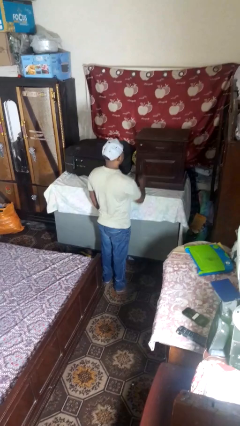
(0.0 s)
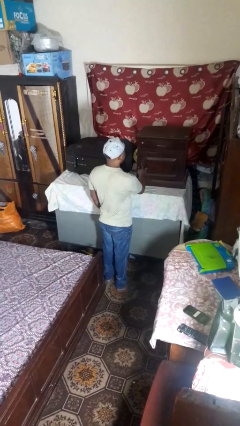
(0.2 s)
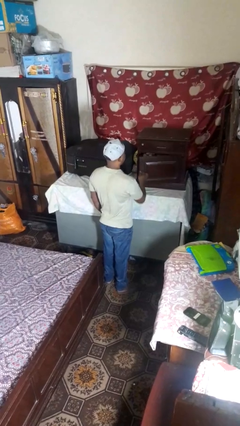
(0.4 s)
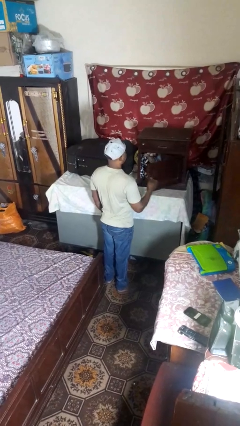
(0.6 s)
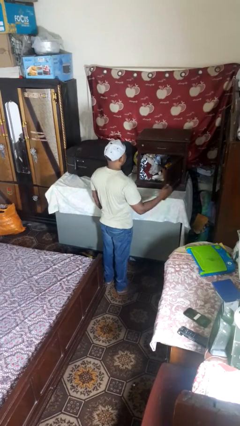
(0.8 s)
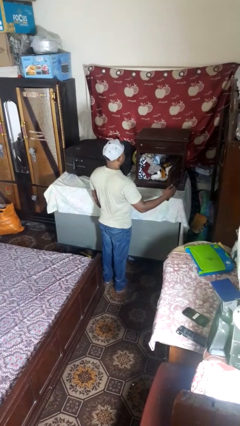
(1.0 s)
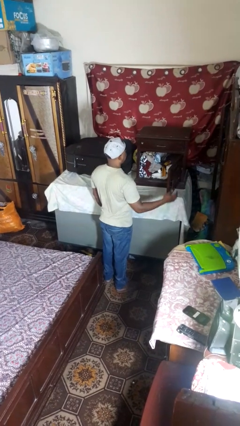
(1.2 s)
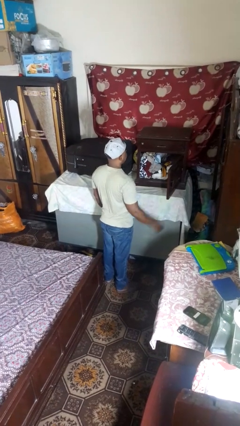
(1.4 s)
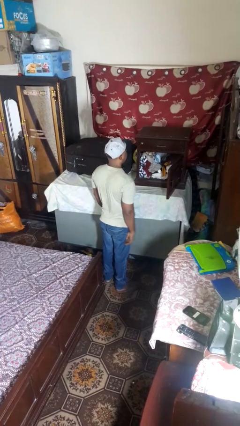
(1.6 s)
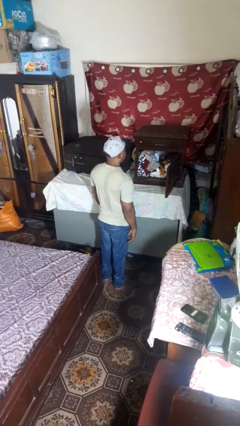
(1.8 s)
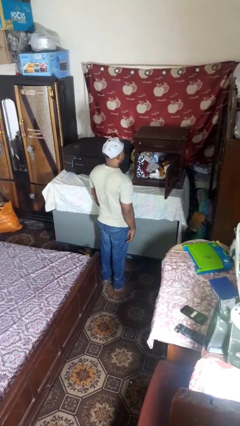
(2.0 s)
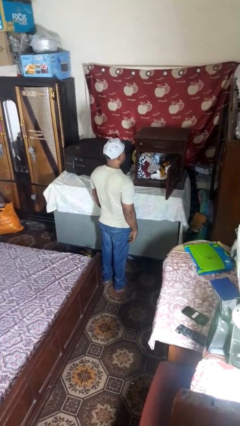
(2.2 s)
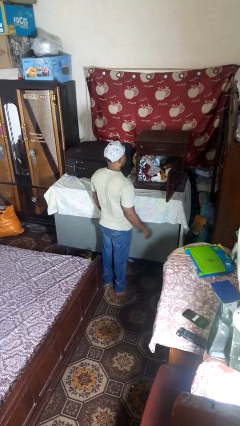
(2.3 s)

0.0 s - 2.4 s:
person opens closet door

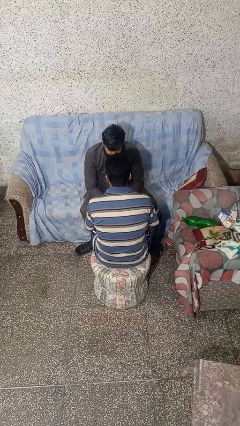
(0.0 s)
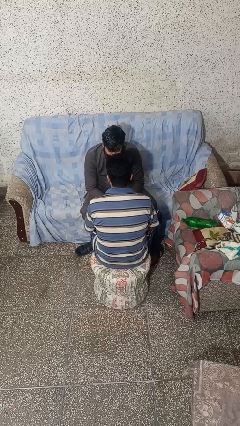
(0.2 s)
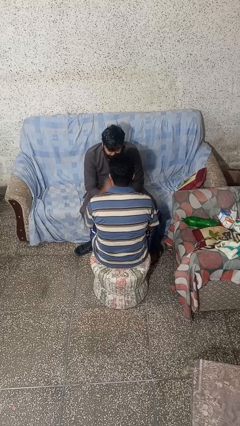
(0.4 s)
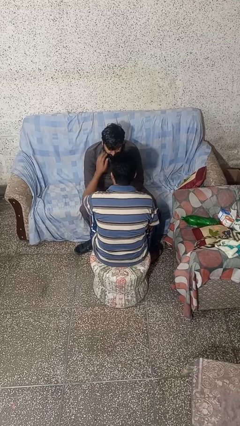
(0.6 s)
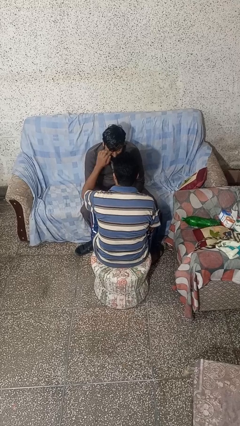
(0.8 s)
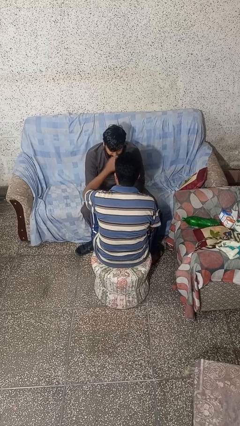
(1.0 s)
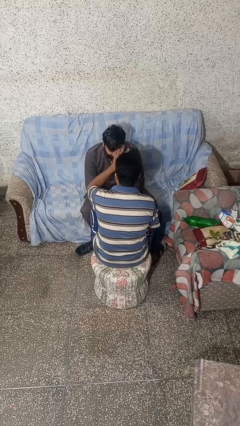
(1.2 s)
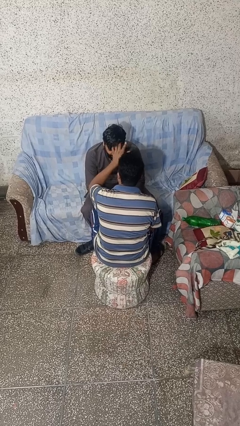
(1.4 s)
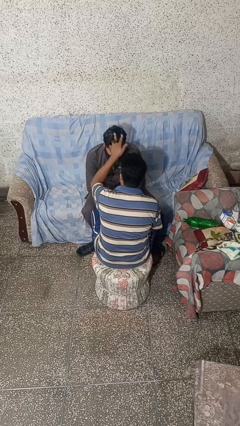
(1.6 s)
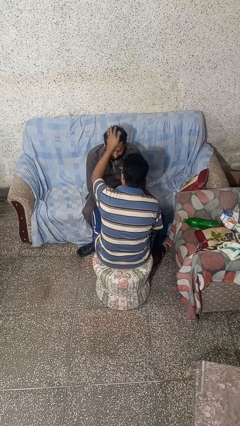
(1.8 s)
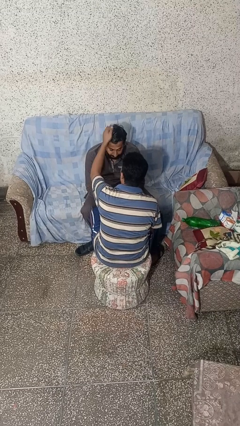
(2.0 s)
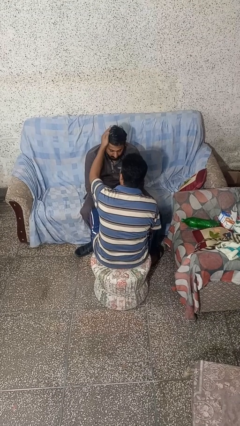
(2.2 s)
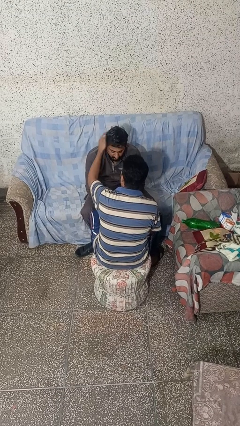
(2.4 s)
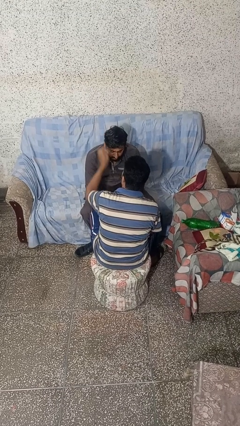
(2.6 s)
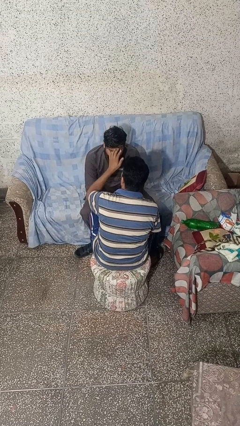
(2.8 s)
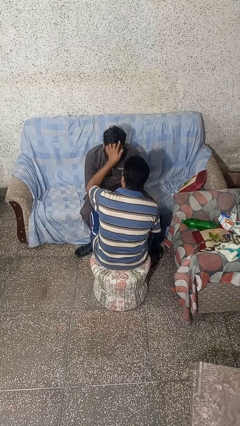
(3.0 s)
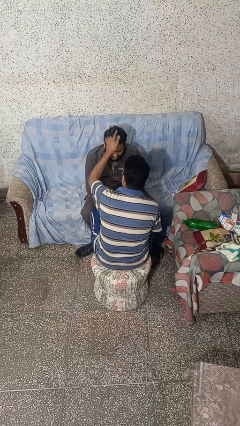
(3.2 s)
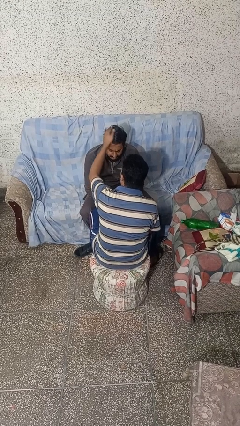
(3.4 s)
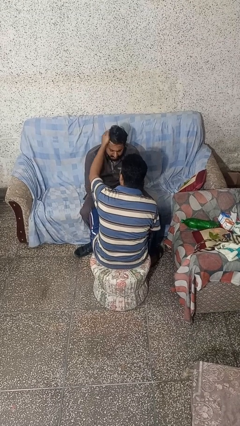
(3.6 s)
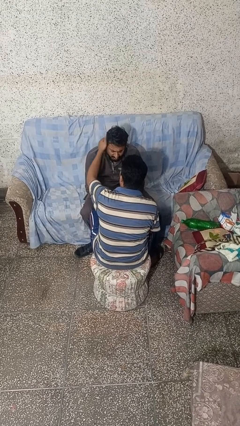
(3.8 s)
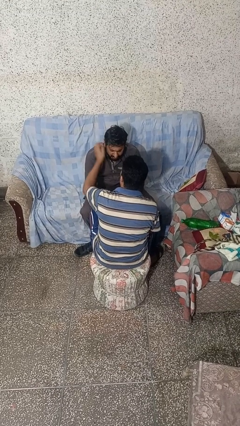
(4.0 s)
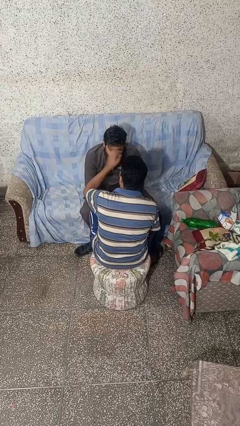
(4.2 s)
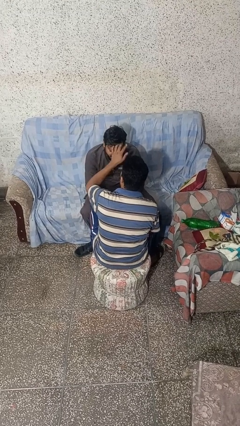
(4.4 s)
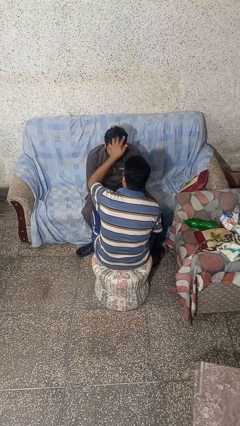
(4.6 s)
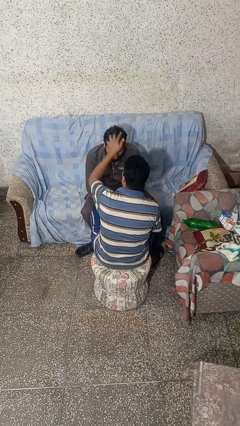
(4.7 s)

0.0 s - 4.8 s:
person braids hair of person

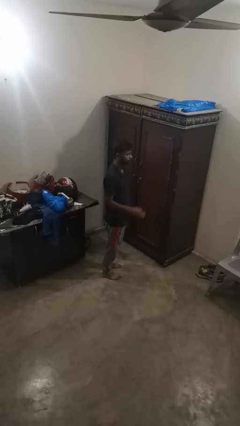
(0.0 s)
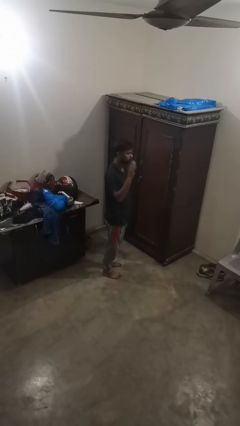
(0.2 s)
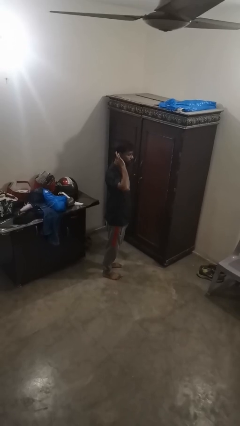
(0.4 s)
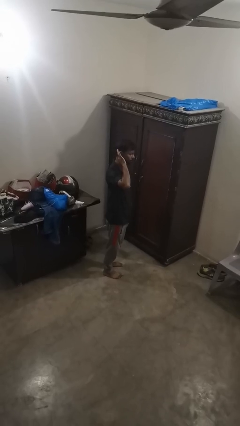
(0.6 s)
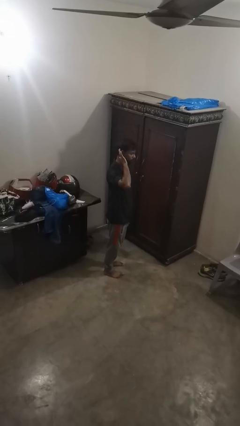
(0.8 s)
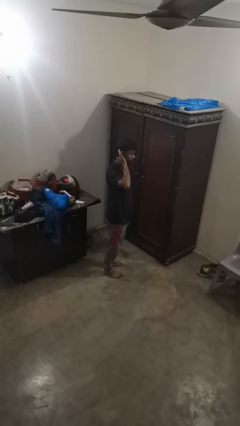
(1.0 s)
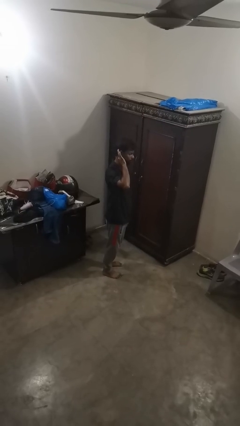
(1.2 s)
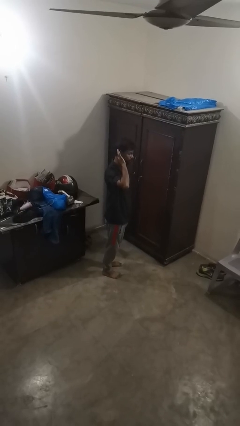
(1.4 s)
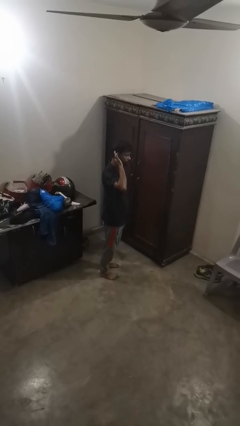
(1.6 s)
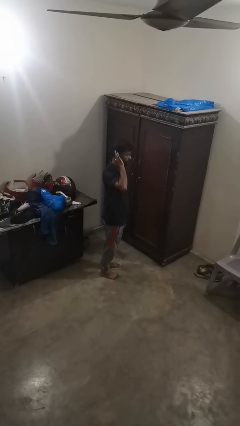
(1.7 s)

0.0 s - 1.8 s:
person gestures listen closely

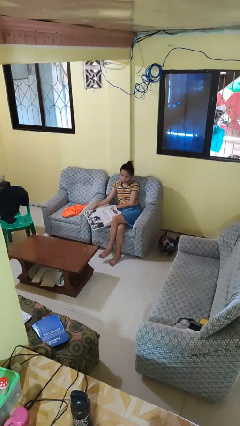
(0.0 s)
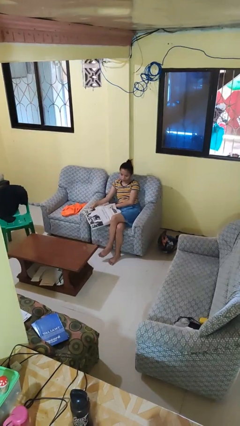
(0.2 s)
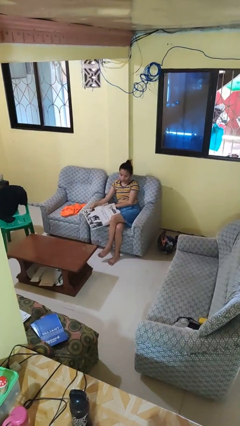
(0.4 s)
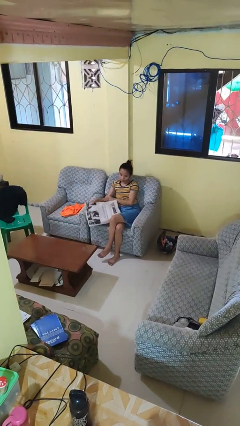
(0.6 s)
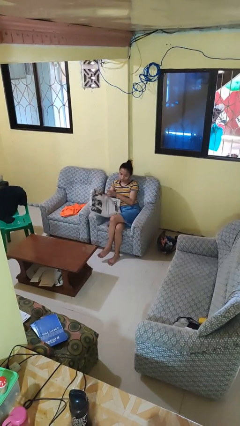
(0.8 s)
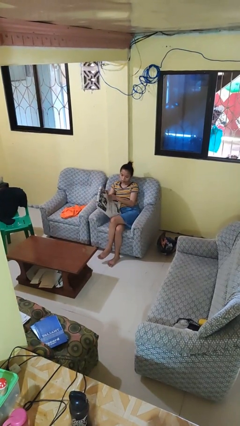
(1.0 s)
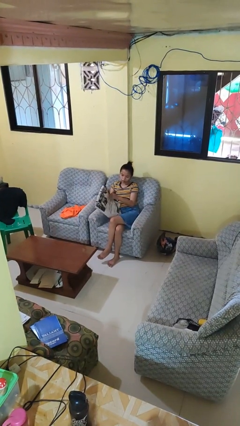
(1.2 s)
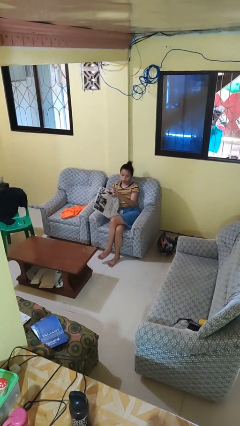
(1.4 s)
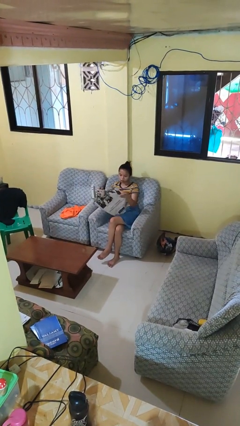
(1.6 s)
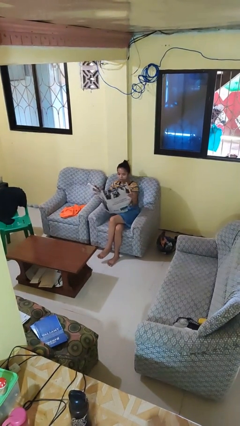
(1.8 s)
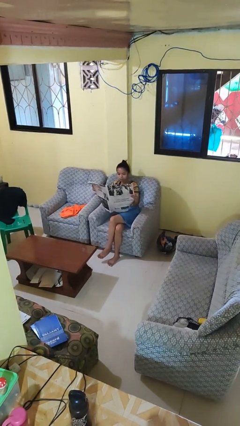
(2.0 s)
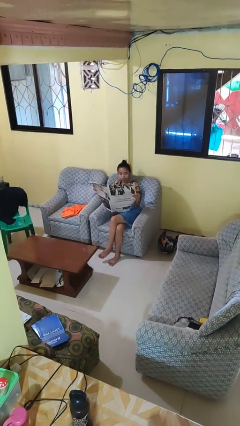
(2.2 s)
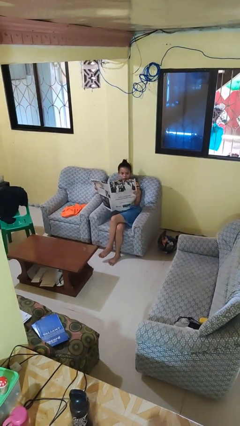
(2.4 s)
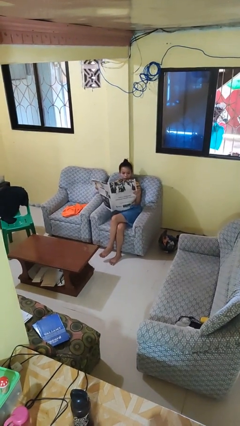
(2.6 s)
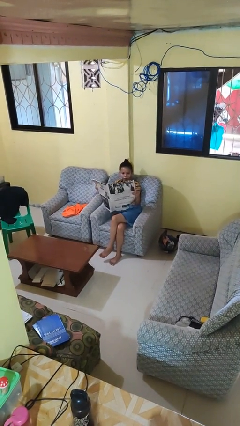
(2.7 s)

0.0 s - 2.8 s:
person reads newspaper

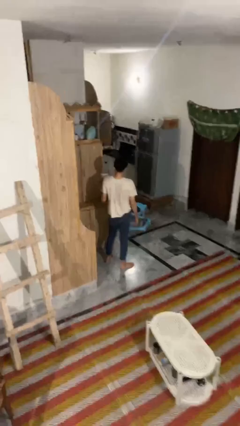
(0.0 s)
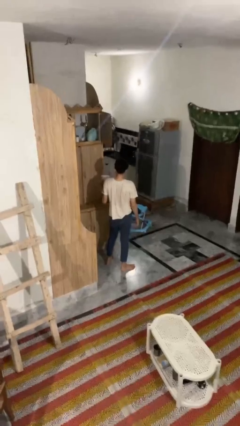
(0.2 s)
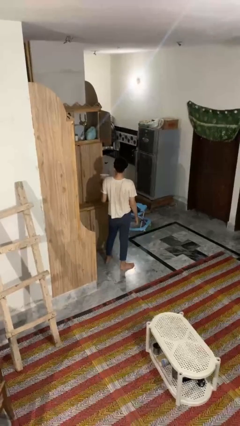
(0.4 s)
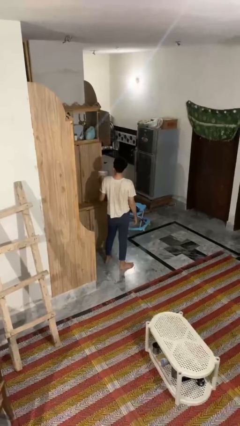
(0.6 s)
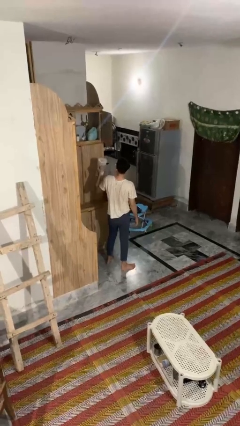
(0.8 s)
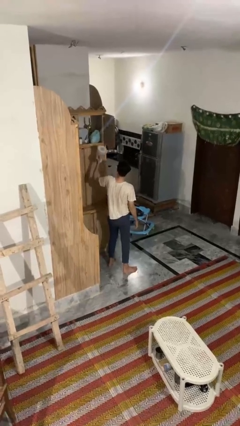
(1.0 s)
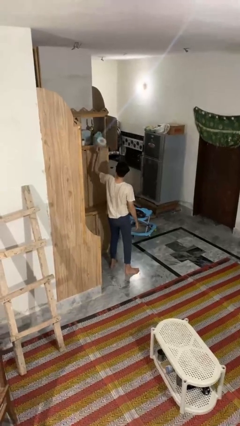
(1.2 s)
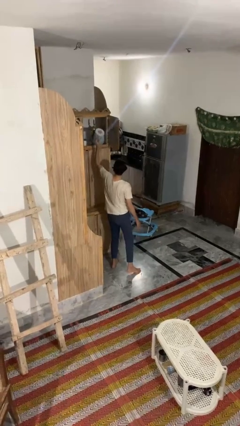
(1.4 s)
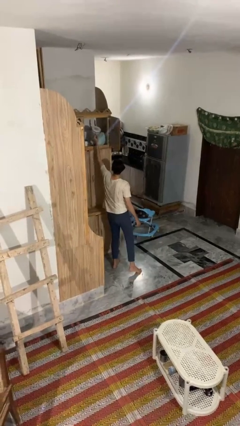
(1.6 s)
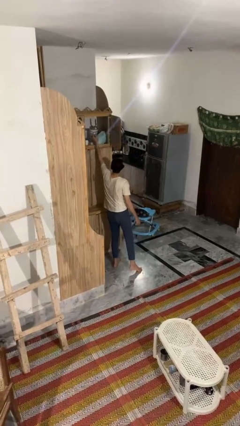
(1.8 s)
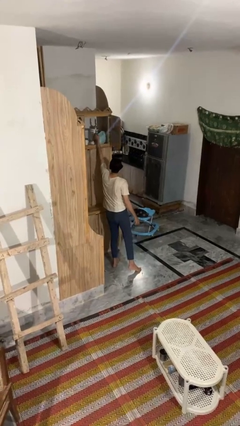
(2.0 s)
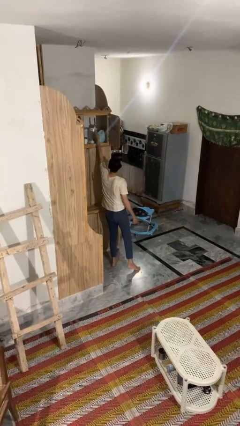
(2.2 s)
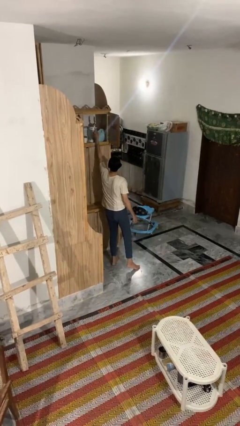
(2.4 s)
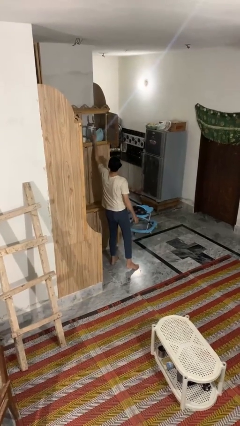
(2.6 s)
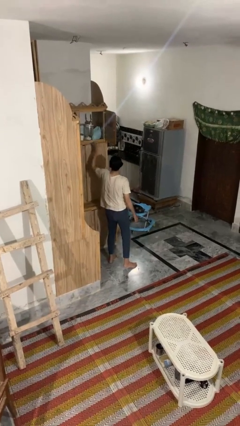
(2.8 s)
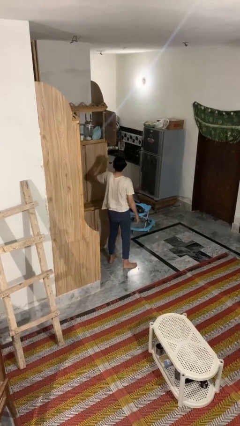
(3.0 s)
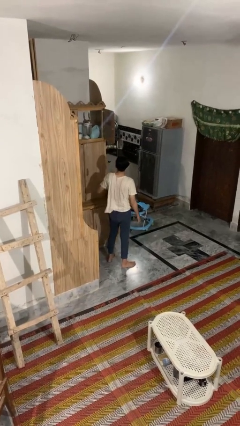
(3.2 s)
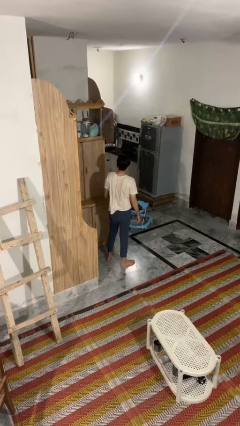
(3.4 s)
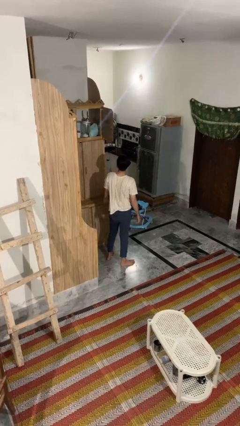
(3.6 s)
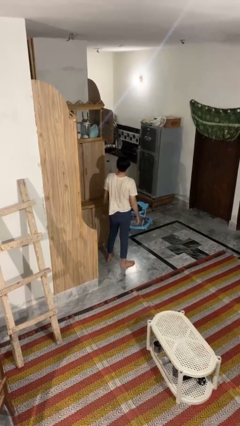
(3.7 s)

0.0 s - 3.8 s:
person puts down object on shelf

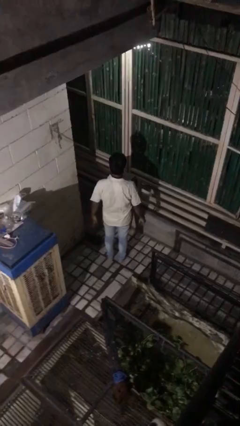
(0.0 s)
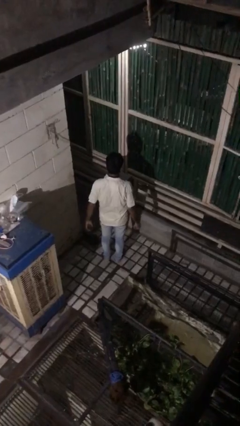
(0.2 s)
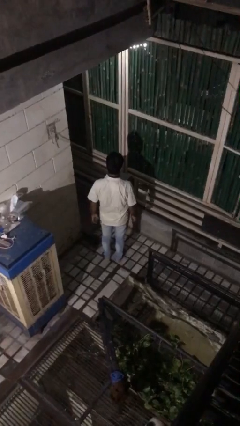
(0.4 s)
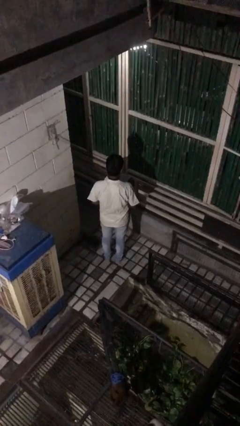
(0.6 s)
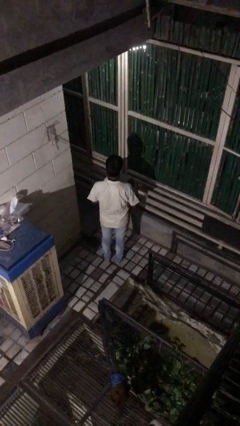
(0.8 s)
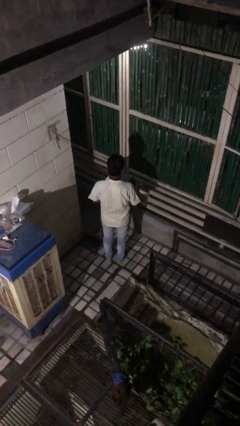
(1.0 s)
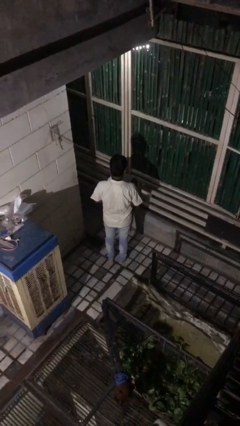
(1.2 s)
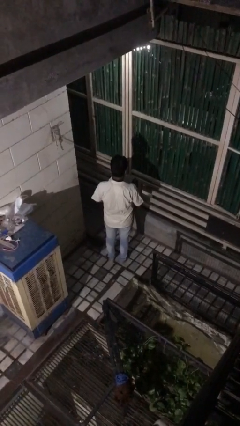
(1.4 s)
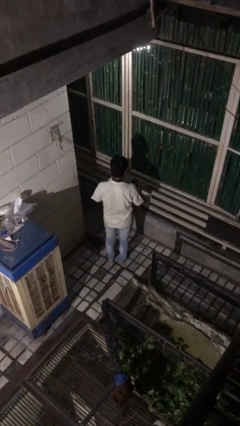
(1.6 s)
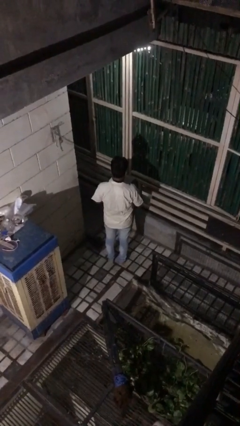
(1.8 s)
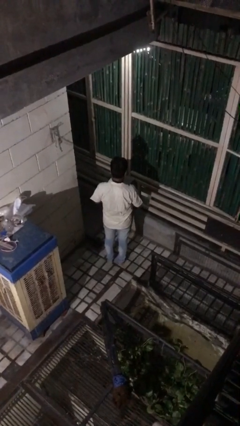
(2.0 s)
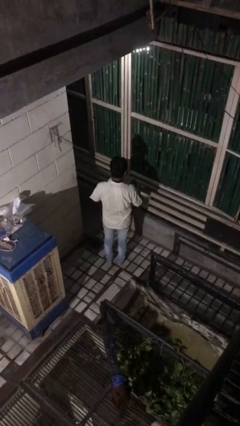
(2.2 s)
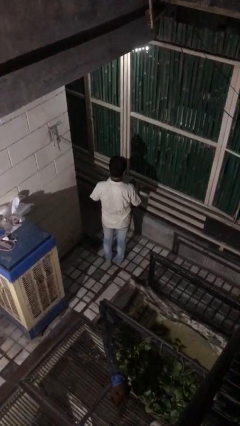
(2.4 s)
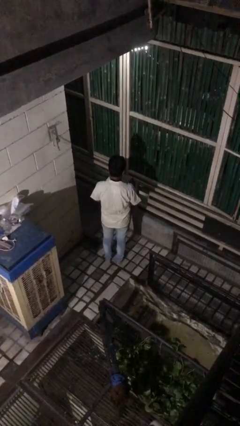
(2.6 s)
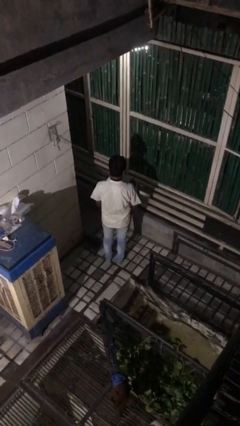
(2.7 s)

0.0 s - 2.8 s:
person puts on ring
